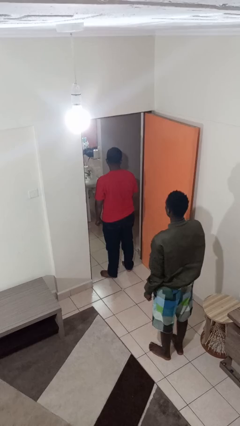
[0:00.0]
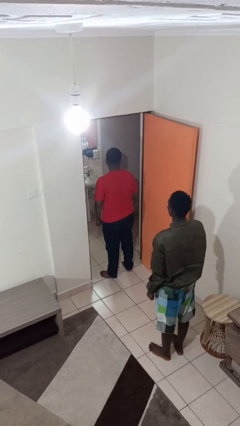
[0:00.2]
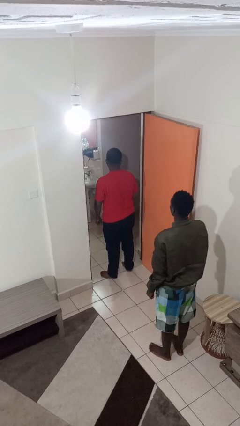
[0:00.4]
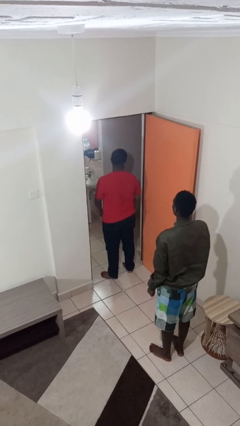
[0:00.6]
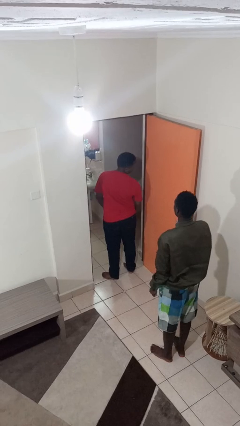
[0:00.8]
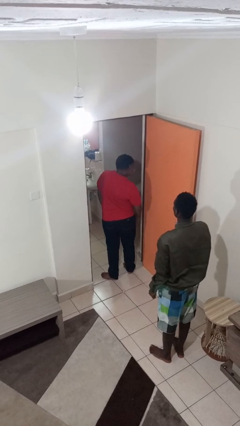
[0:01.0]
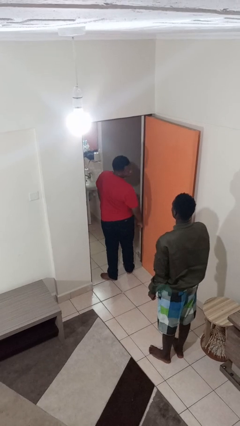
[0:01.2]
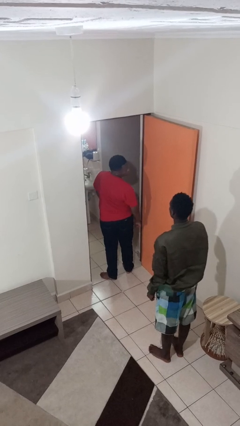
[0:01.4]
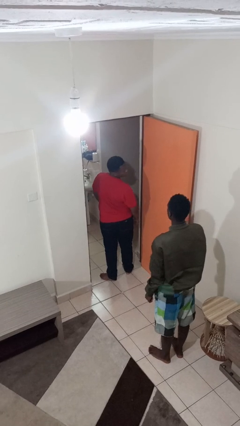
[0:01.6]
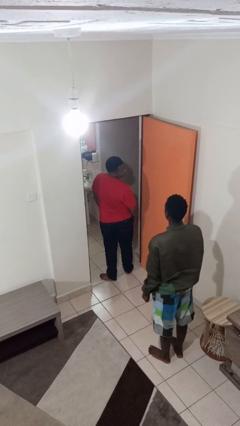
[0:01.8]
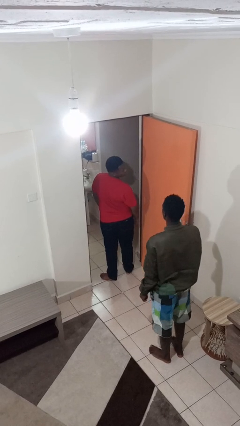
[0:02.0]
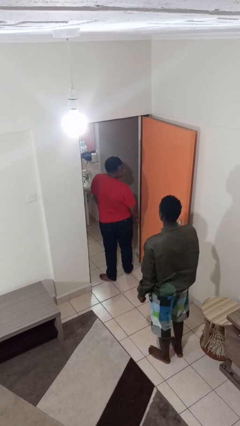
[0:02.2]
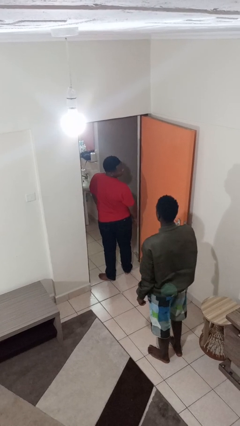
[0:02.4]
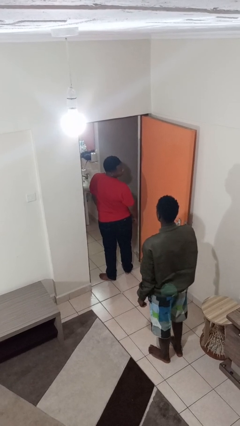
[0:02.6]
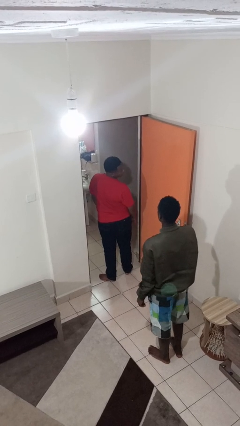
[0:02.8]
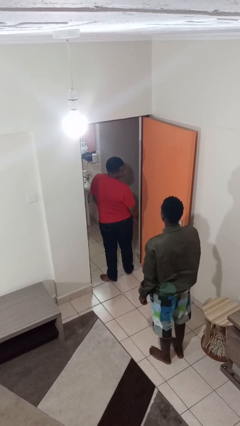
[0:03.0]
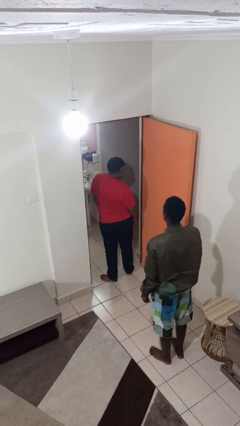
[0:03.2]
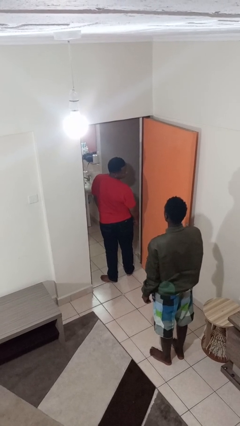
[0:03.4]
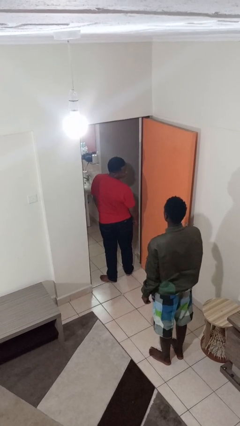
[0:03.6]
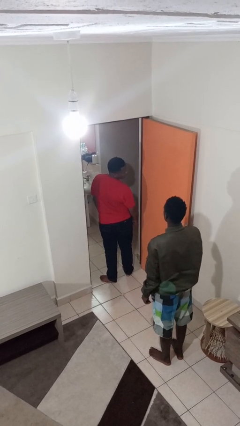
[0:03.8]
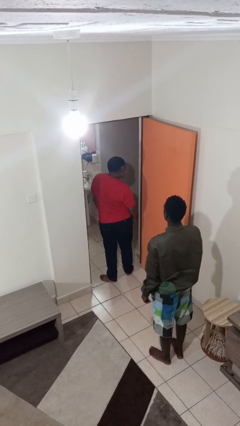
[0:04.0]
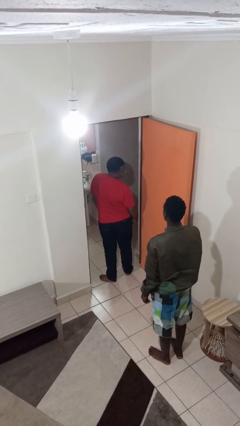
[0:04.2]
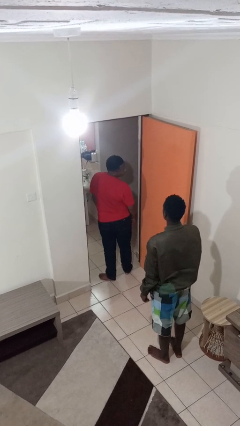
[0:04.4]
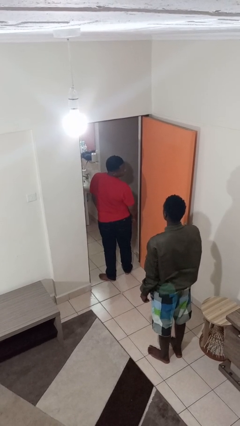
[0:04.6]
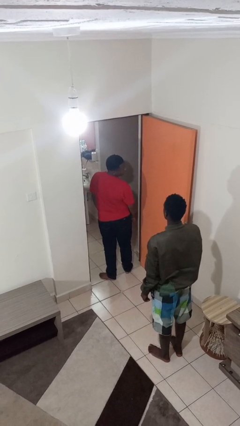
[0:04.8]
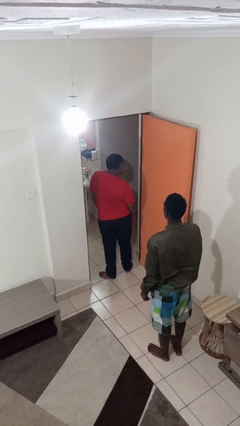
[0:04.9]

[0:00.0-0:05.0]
person looks over shoulder

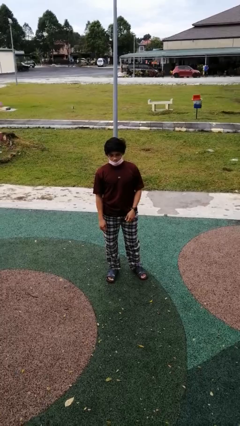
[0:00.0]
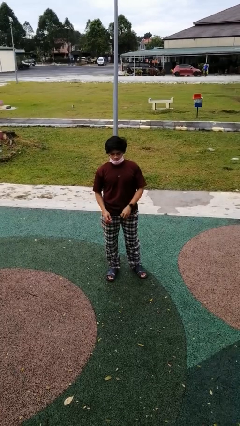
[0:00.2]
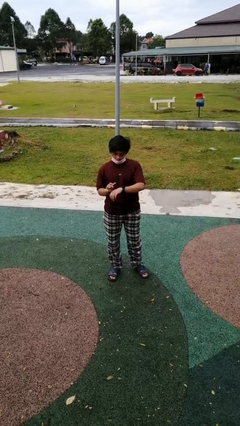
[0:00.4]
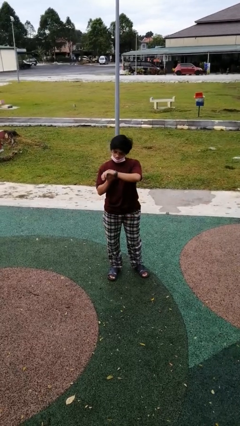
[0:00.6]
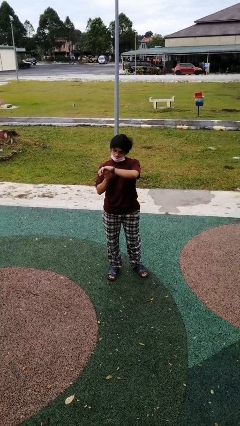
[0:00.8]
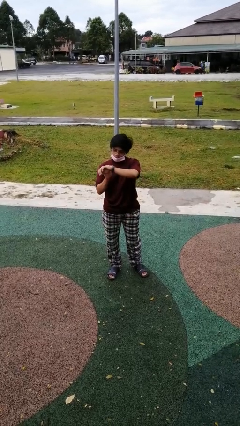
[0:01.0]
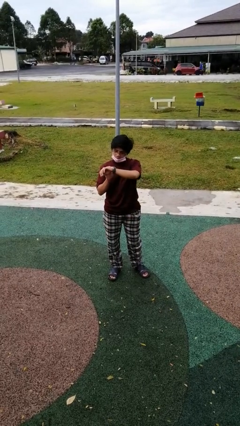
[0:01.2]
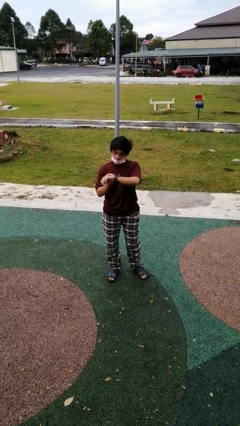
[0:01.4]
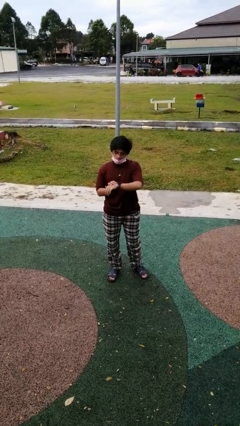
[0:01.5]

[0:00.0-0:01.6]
person looks at wristwatch

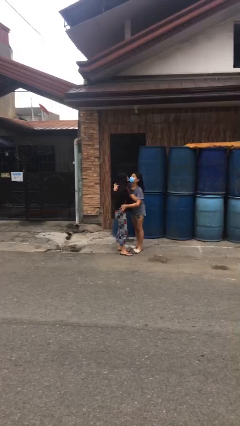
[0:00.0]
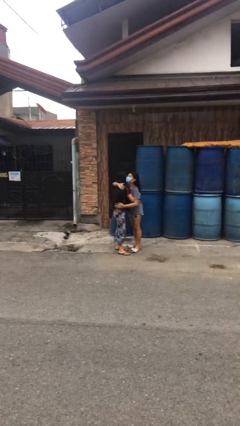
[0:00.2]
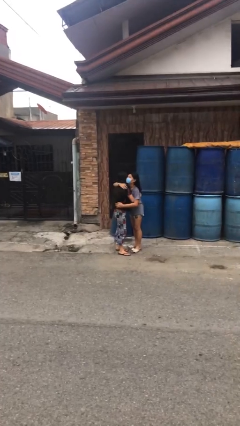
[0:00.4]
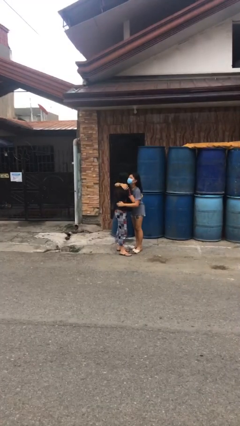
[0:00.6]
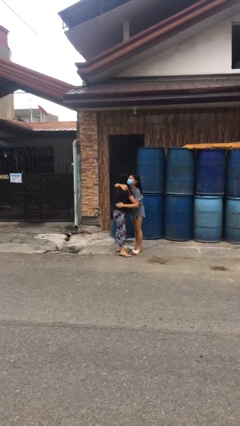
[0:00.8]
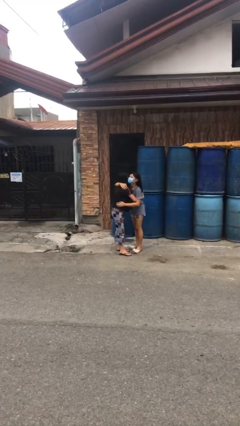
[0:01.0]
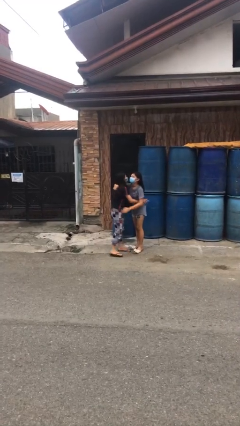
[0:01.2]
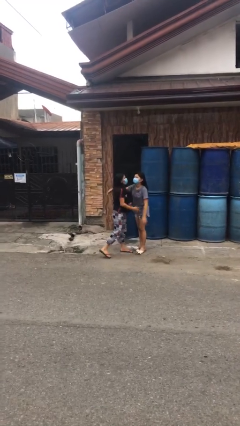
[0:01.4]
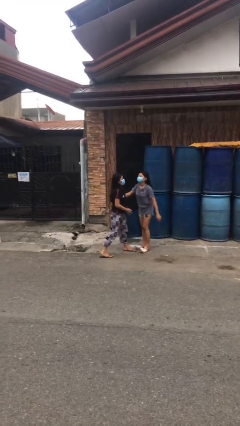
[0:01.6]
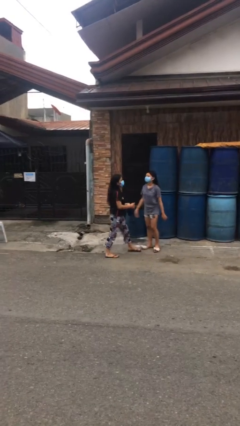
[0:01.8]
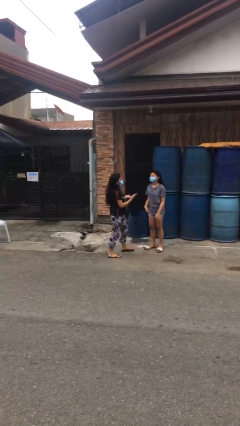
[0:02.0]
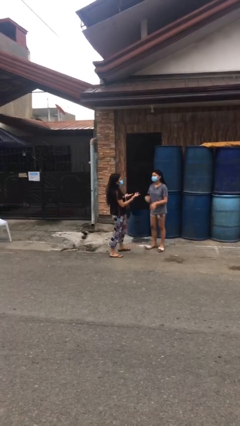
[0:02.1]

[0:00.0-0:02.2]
person embraces person

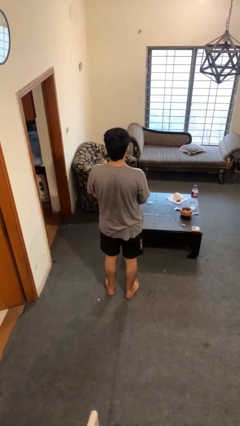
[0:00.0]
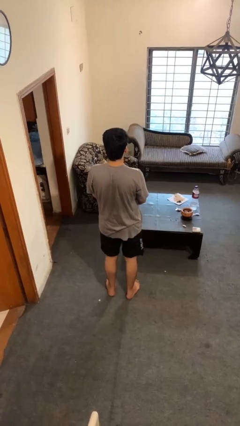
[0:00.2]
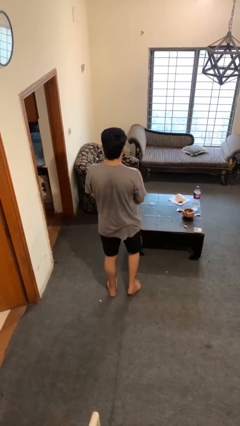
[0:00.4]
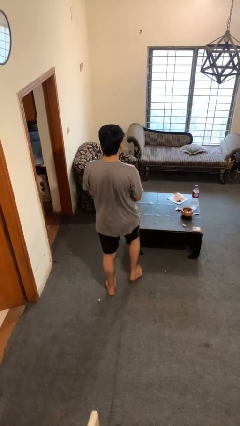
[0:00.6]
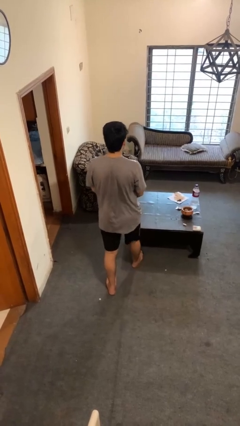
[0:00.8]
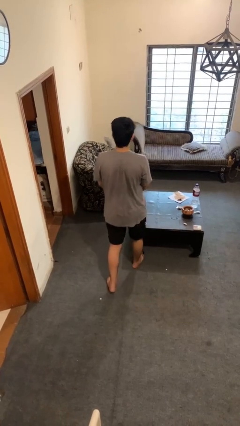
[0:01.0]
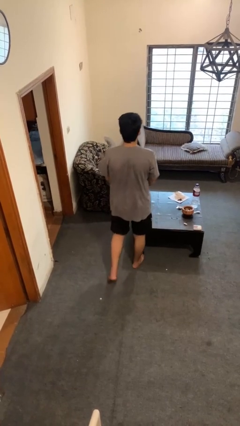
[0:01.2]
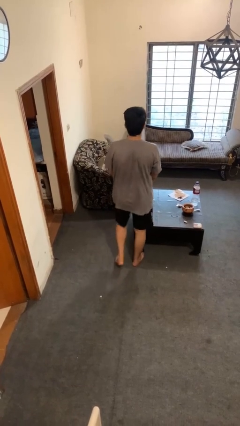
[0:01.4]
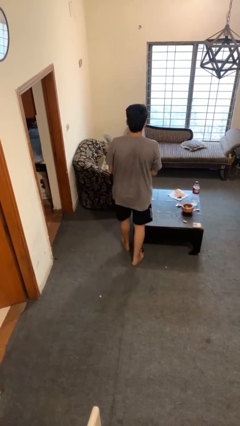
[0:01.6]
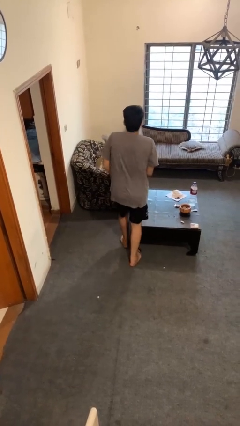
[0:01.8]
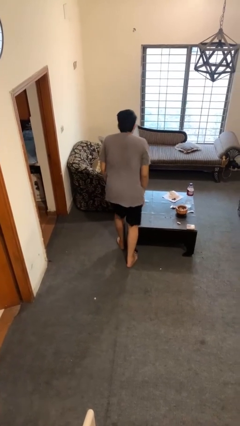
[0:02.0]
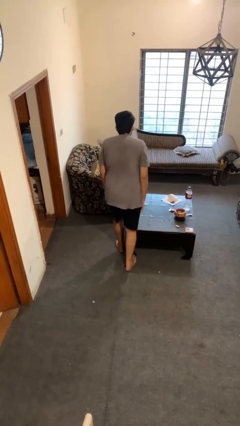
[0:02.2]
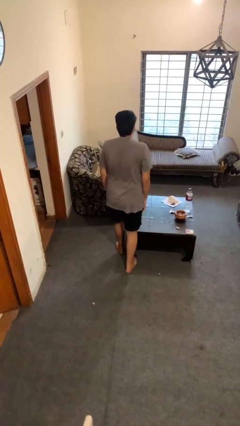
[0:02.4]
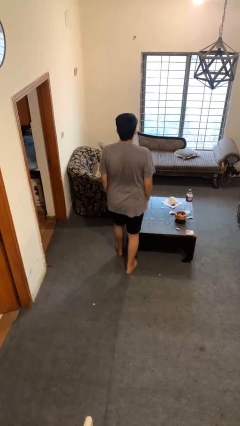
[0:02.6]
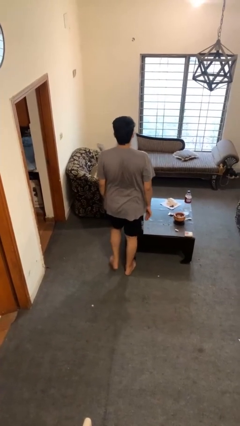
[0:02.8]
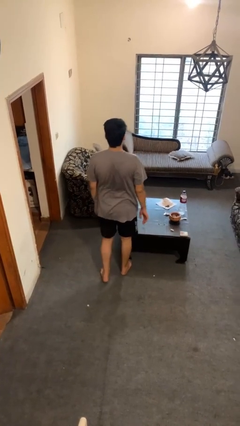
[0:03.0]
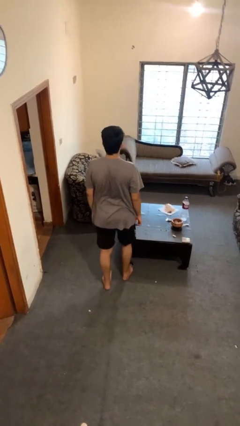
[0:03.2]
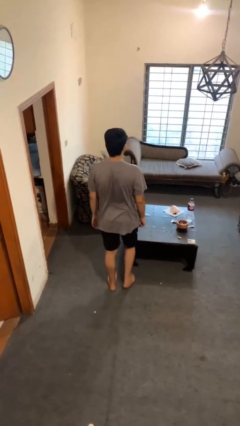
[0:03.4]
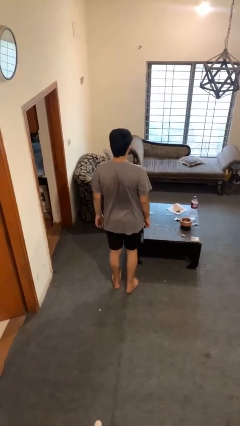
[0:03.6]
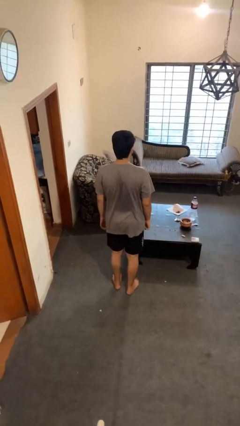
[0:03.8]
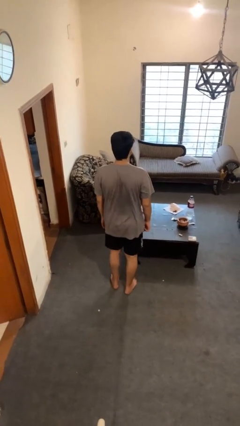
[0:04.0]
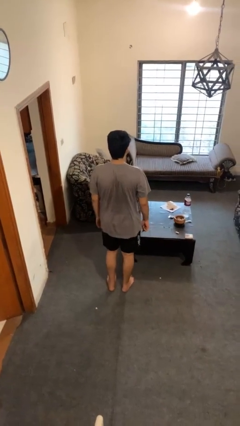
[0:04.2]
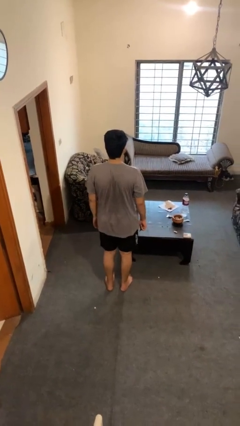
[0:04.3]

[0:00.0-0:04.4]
person bumps into table

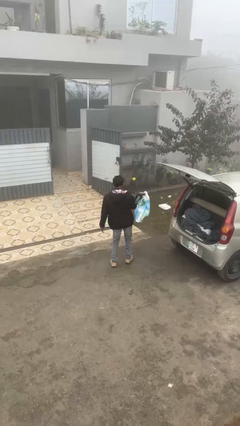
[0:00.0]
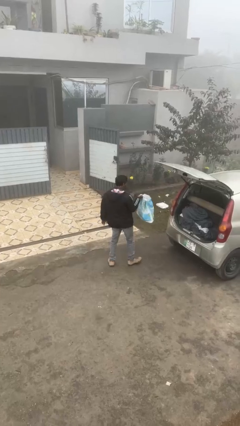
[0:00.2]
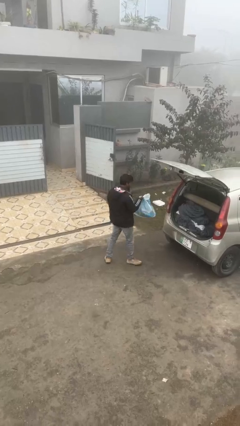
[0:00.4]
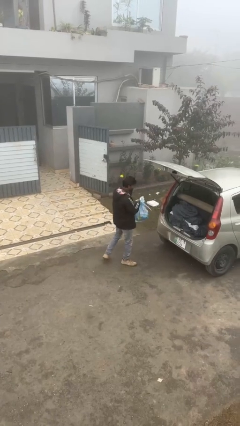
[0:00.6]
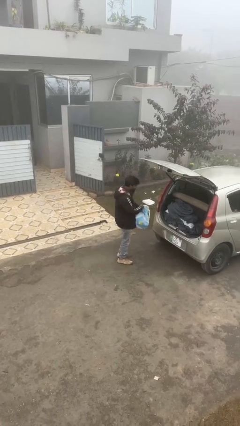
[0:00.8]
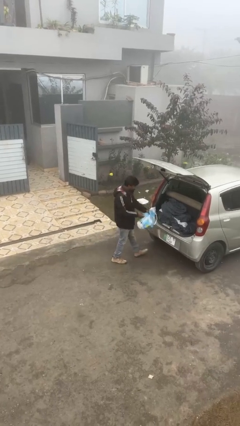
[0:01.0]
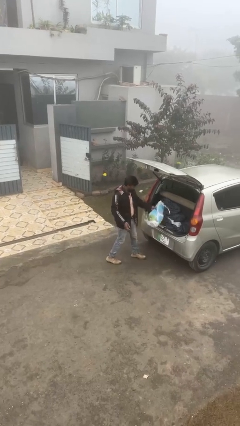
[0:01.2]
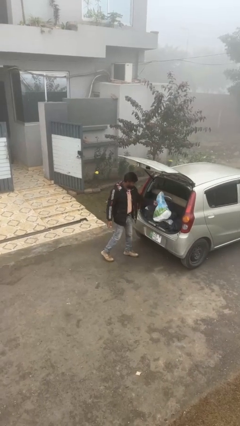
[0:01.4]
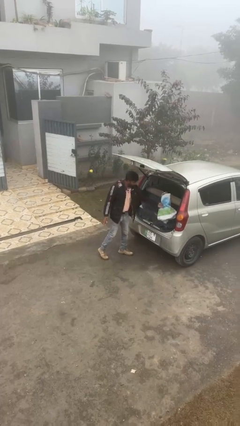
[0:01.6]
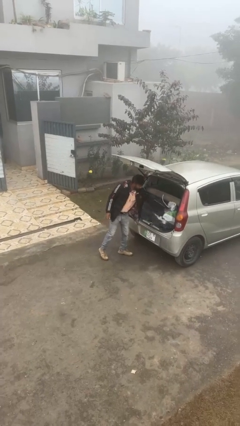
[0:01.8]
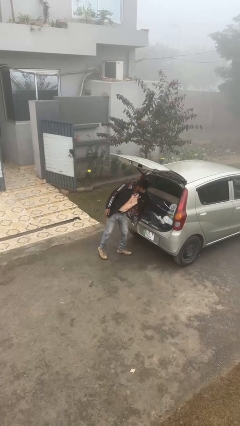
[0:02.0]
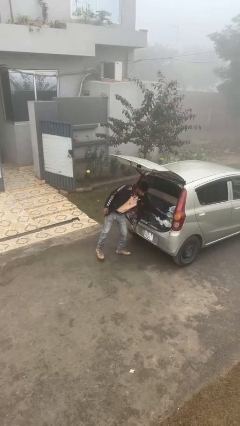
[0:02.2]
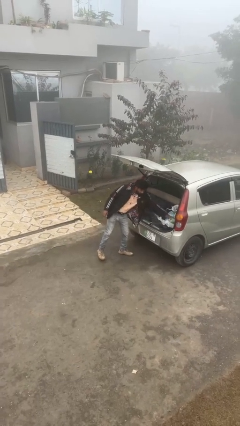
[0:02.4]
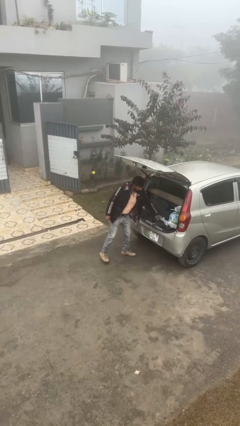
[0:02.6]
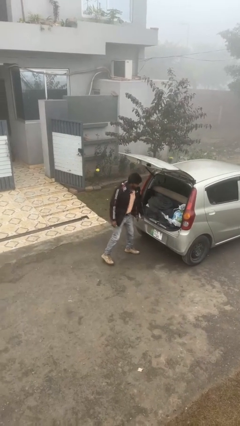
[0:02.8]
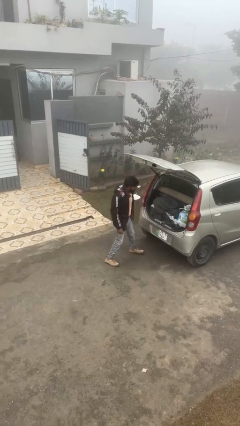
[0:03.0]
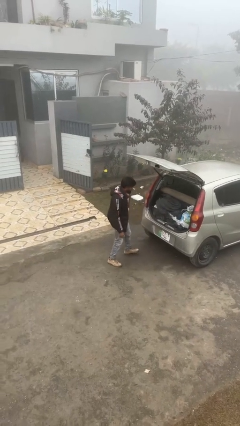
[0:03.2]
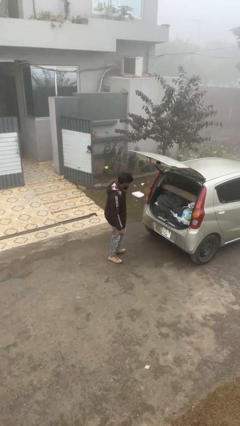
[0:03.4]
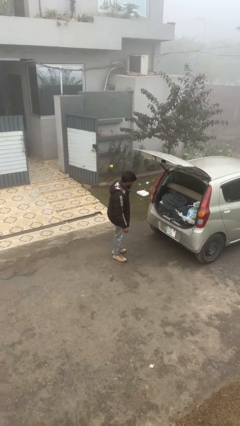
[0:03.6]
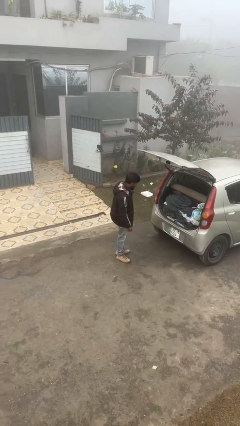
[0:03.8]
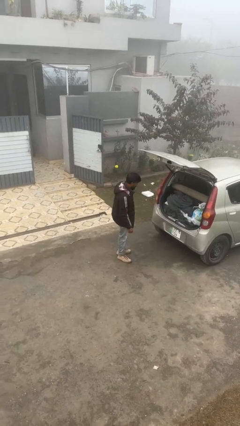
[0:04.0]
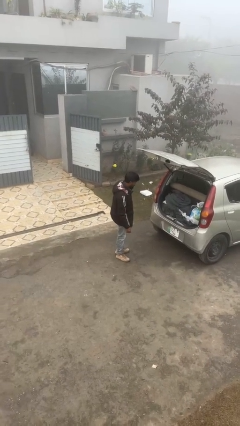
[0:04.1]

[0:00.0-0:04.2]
person loads car
